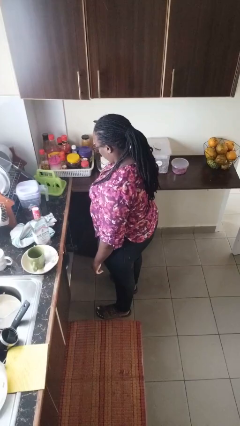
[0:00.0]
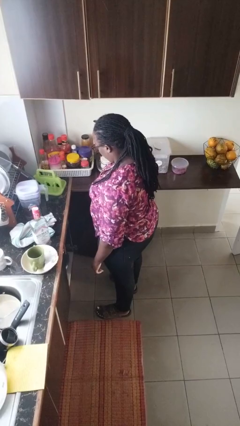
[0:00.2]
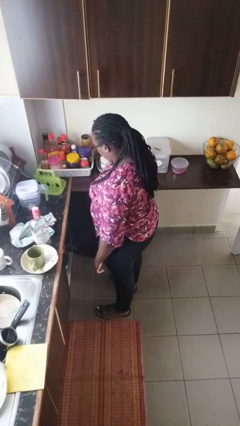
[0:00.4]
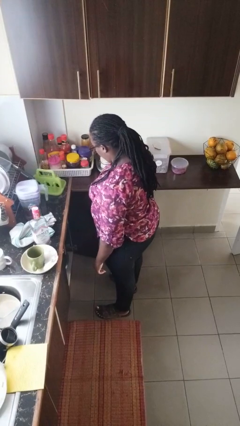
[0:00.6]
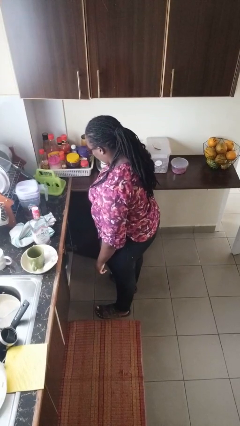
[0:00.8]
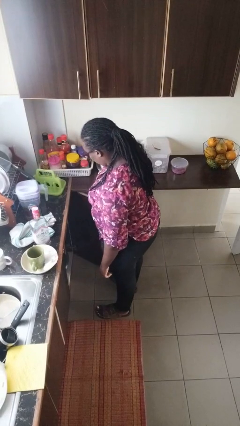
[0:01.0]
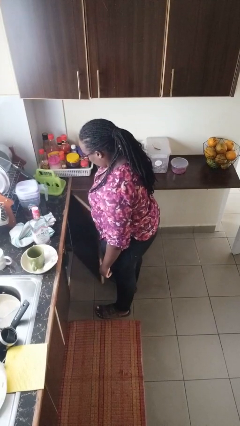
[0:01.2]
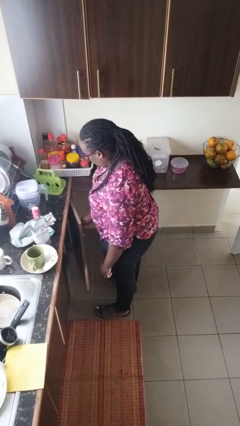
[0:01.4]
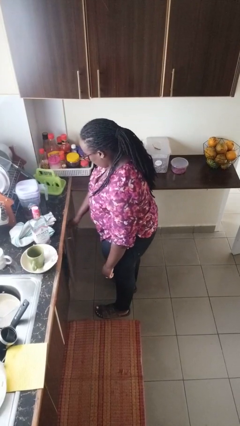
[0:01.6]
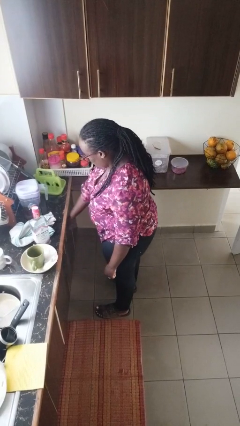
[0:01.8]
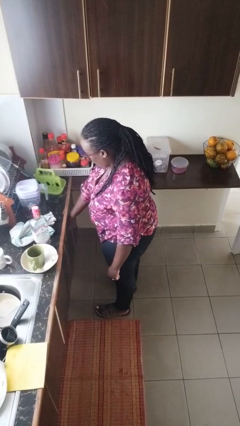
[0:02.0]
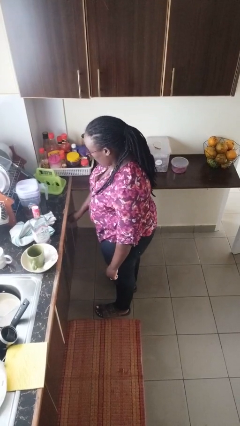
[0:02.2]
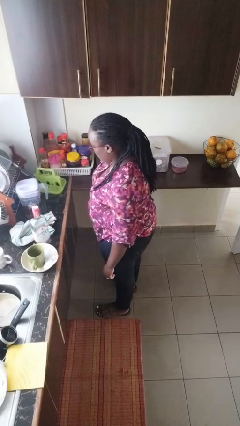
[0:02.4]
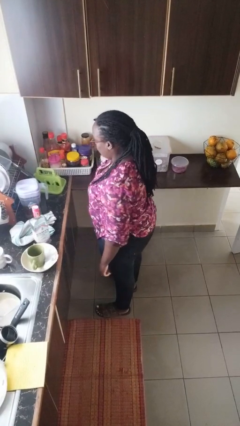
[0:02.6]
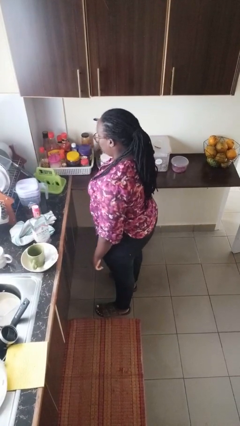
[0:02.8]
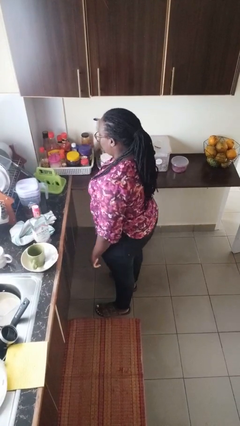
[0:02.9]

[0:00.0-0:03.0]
person closes cabinet

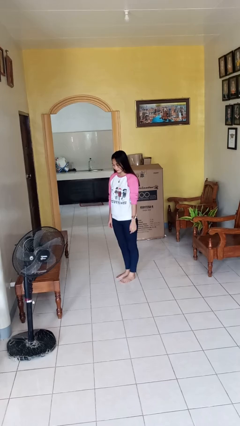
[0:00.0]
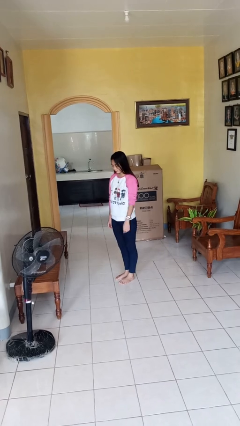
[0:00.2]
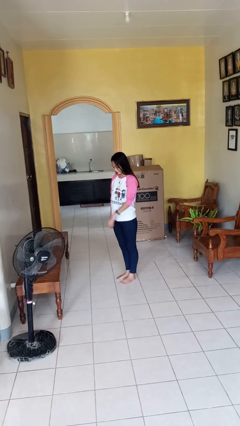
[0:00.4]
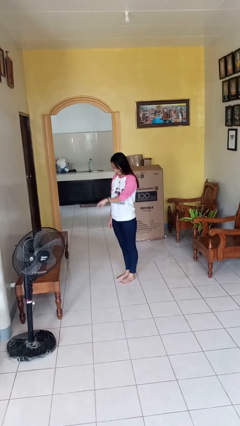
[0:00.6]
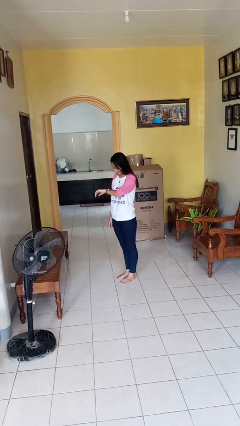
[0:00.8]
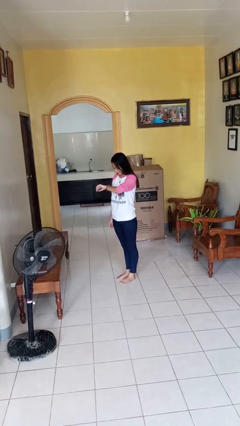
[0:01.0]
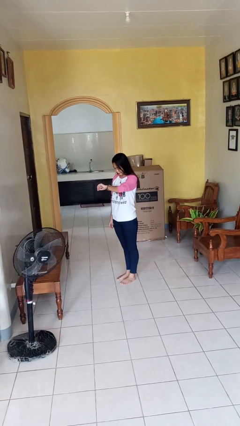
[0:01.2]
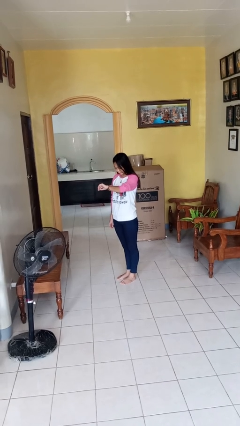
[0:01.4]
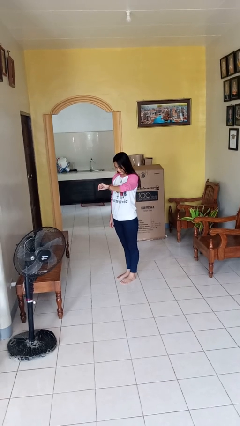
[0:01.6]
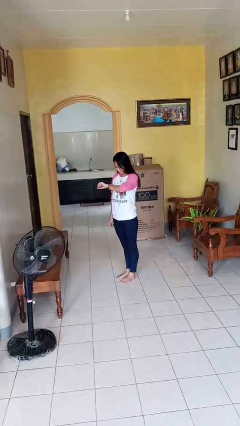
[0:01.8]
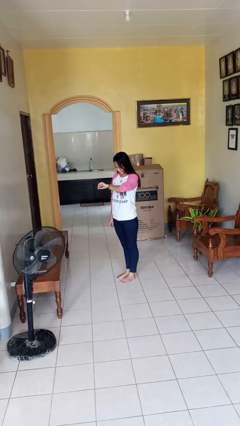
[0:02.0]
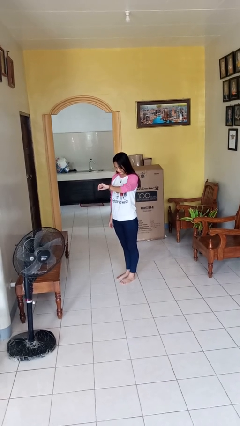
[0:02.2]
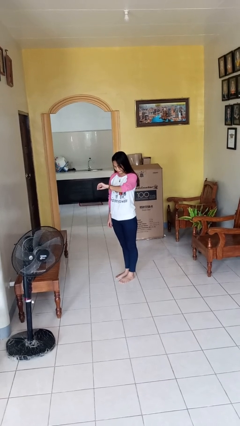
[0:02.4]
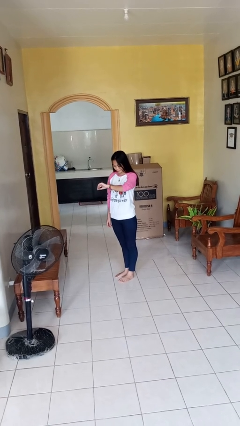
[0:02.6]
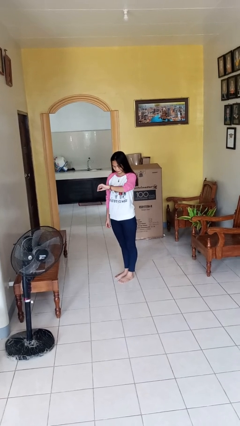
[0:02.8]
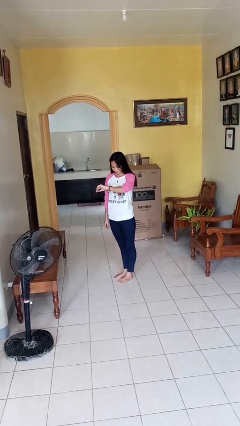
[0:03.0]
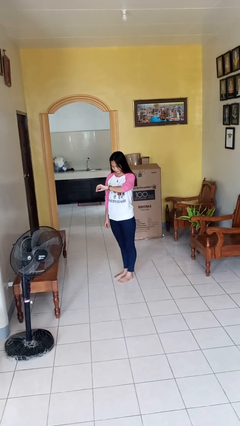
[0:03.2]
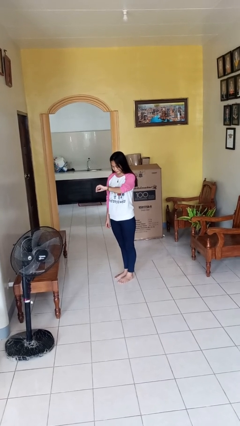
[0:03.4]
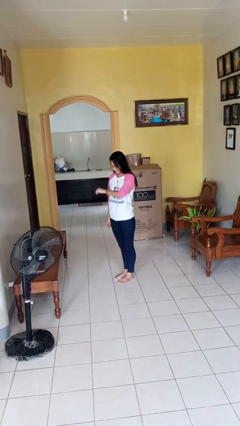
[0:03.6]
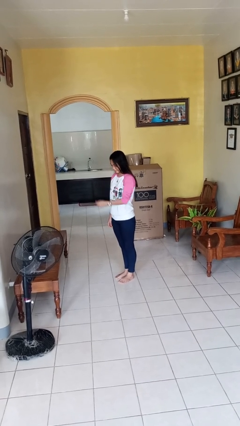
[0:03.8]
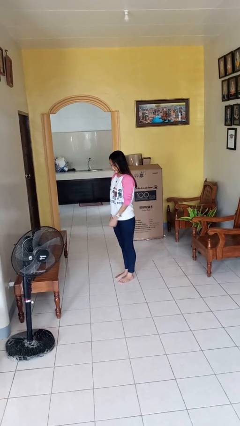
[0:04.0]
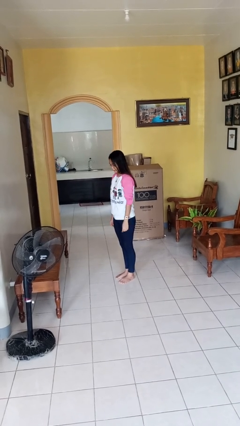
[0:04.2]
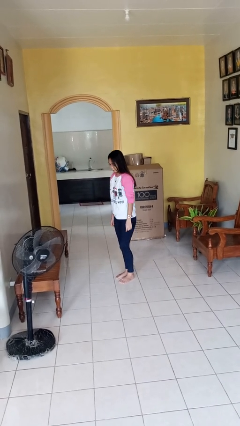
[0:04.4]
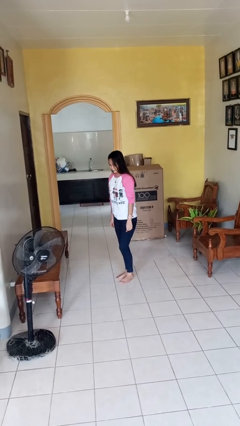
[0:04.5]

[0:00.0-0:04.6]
person looks at wristwatch

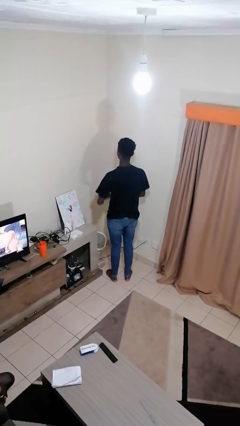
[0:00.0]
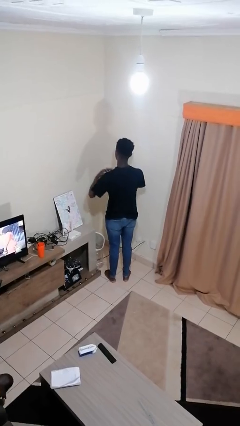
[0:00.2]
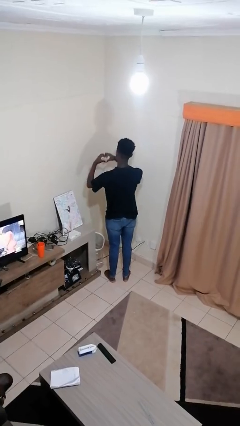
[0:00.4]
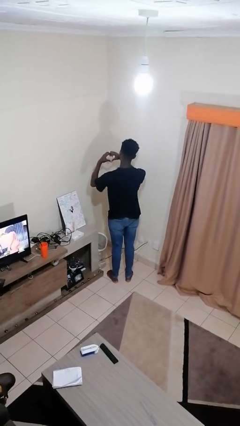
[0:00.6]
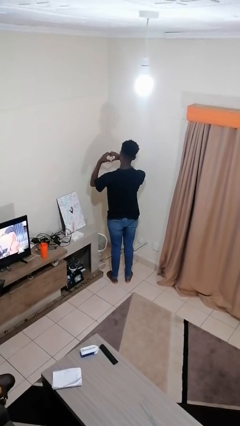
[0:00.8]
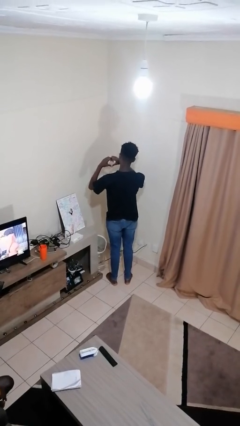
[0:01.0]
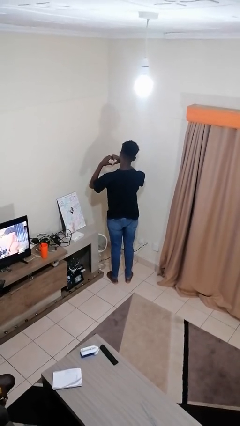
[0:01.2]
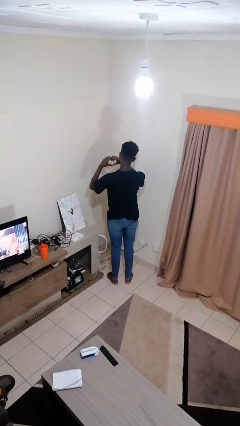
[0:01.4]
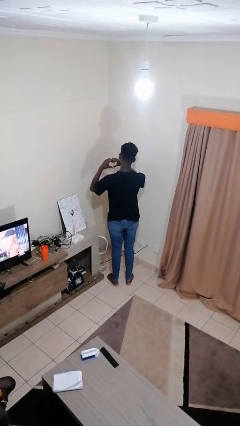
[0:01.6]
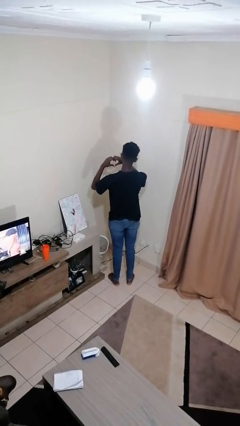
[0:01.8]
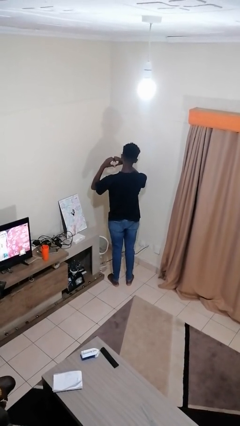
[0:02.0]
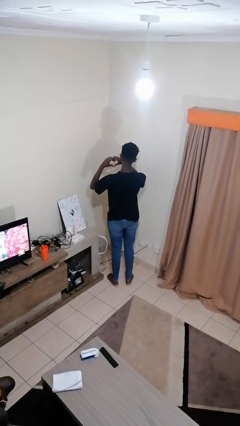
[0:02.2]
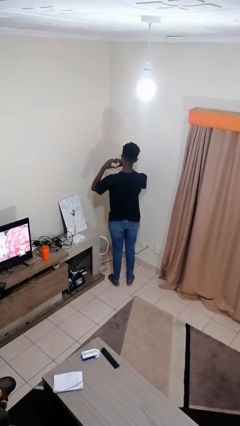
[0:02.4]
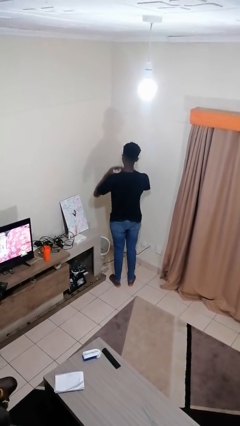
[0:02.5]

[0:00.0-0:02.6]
person gestures heart

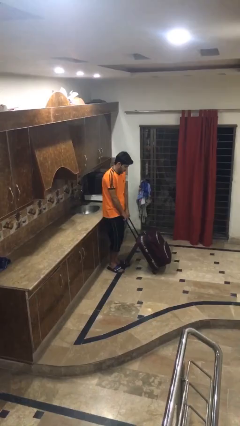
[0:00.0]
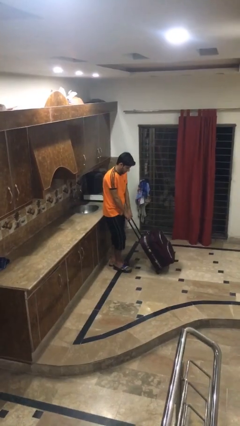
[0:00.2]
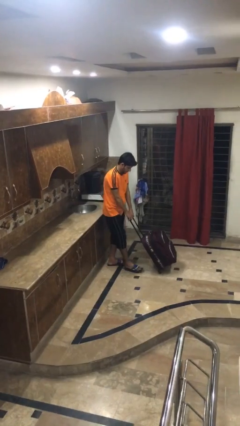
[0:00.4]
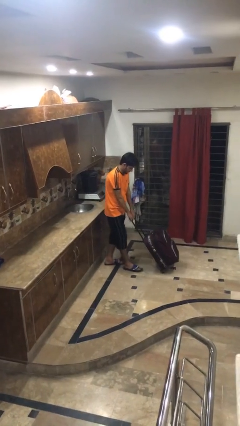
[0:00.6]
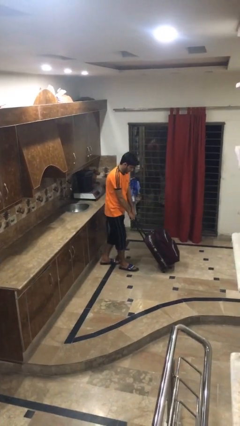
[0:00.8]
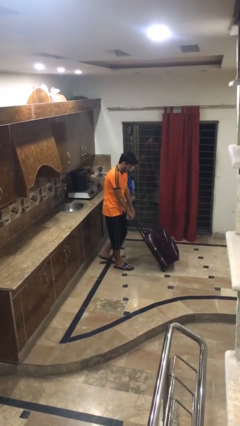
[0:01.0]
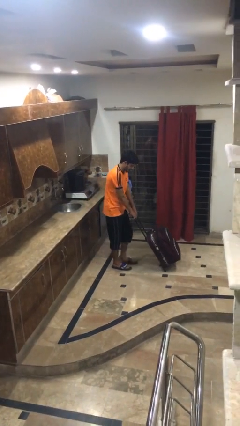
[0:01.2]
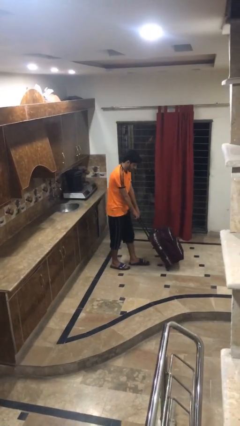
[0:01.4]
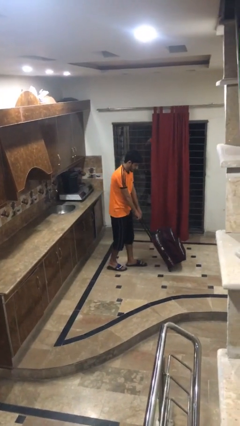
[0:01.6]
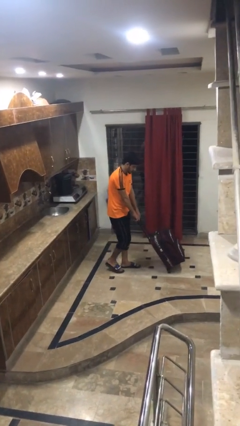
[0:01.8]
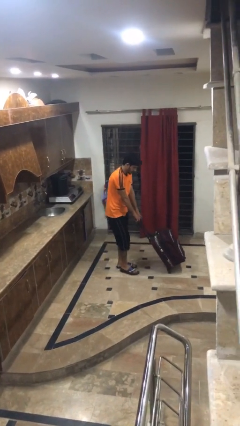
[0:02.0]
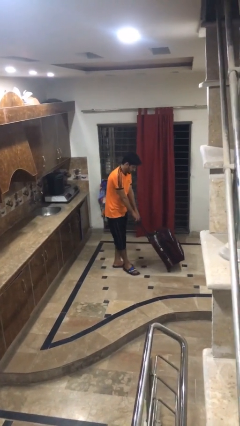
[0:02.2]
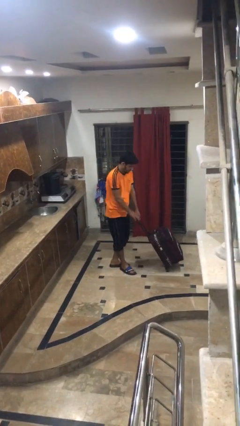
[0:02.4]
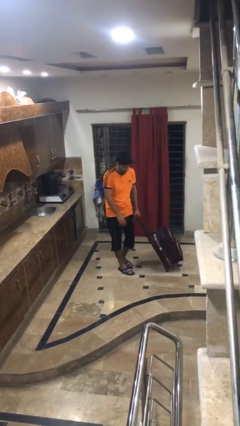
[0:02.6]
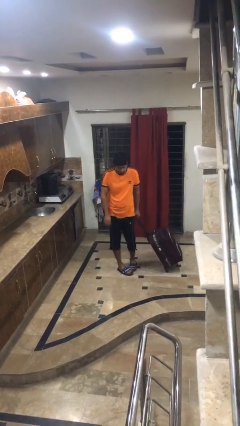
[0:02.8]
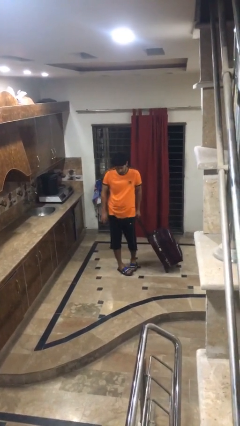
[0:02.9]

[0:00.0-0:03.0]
person pushes wheeled cart

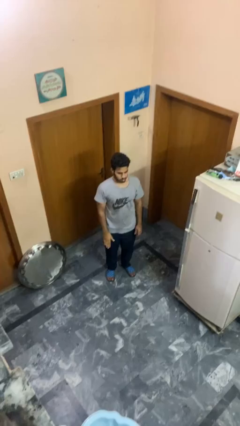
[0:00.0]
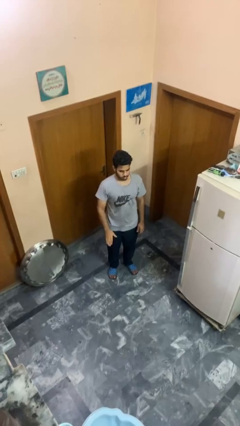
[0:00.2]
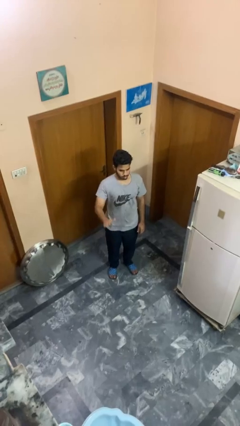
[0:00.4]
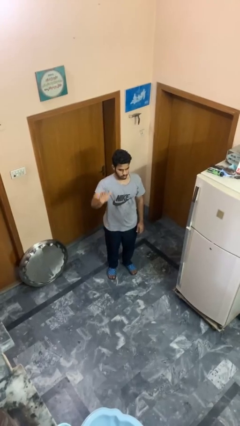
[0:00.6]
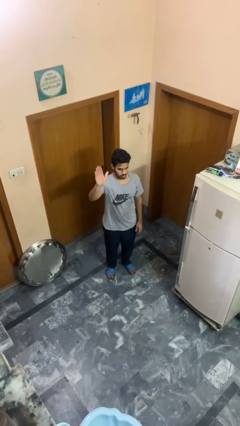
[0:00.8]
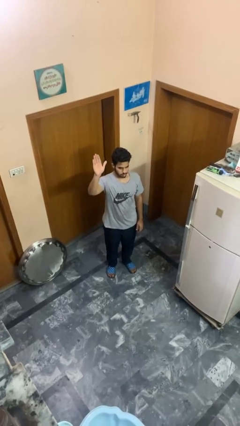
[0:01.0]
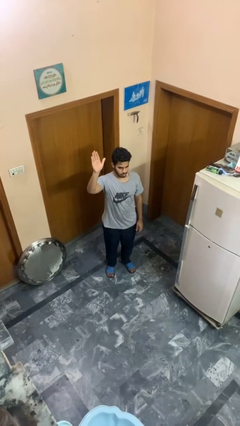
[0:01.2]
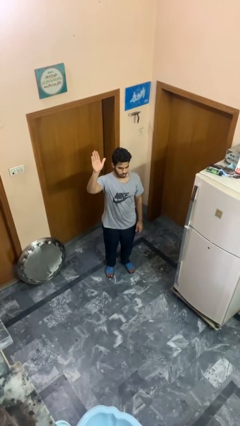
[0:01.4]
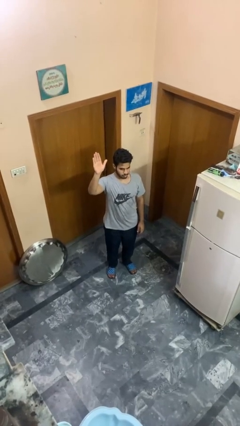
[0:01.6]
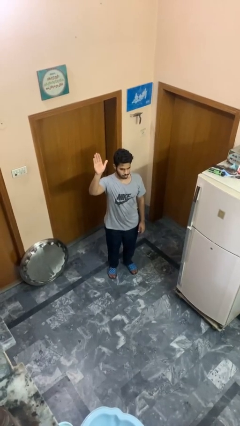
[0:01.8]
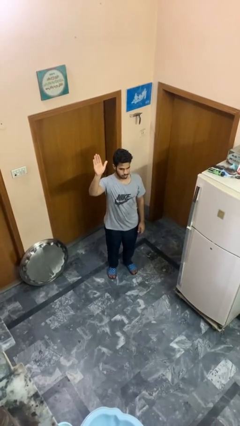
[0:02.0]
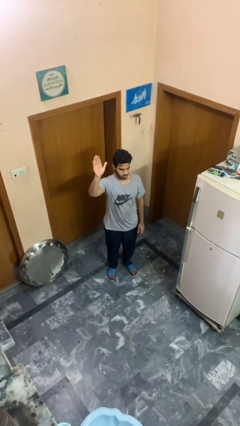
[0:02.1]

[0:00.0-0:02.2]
person gestures raise hand

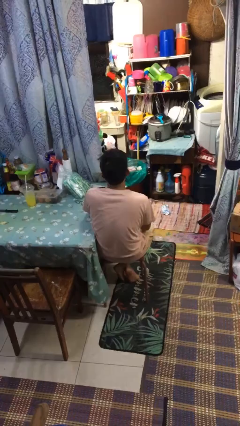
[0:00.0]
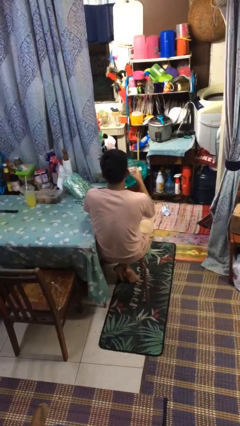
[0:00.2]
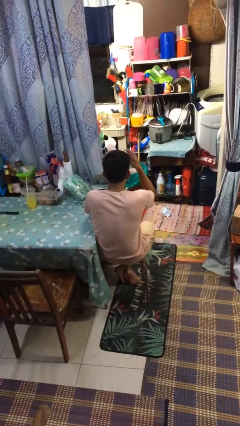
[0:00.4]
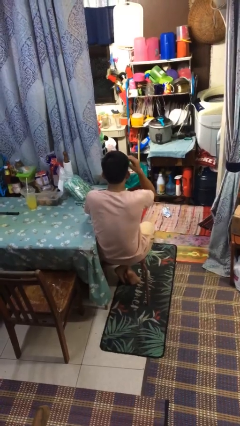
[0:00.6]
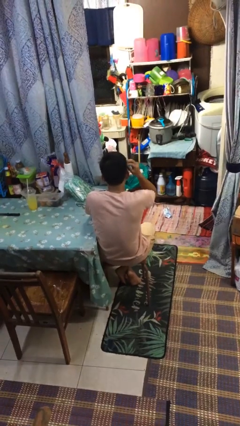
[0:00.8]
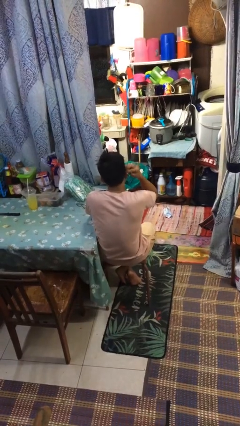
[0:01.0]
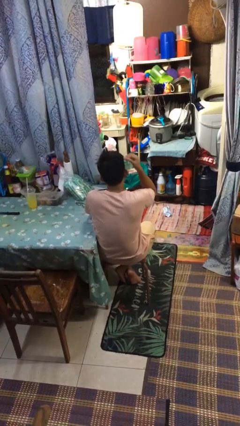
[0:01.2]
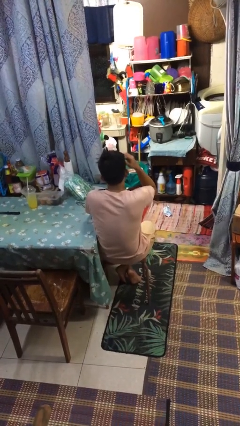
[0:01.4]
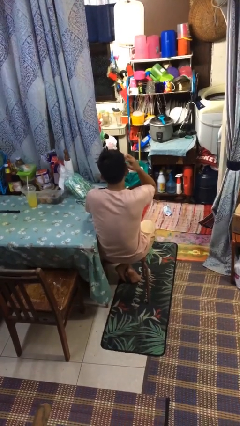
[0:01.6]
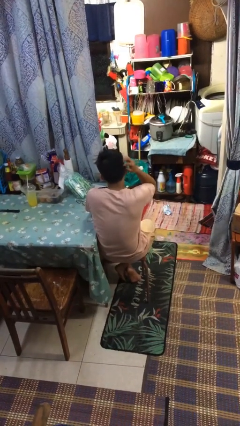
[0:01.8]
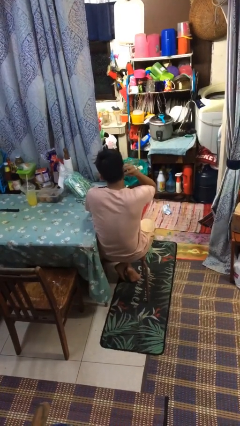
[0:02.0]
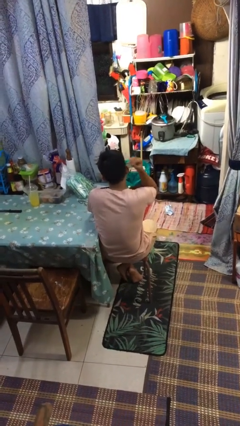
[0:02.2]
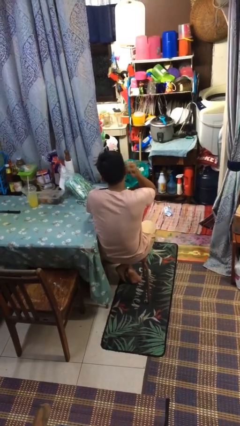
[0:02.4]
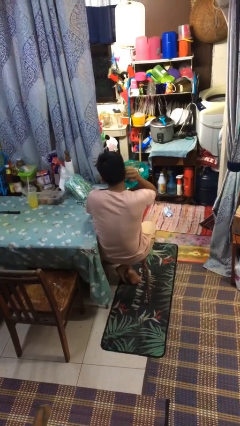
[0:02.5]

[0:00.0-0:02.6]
person strokes hair
